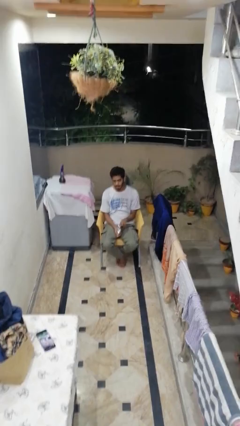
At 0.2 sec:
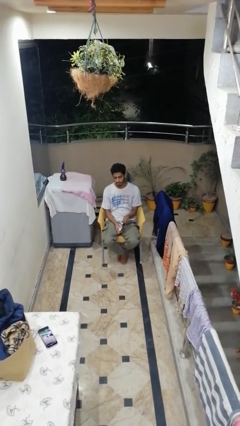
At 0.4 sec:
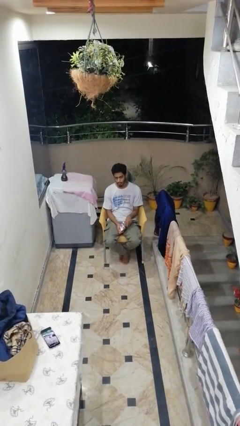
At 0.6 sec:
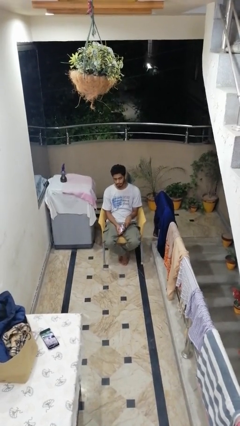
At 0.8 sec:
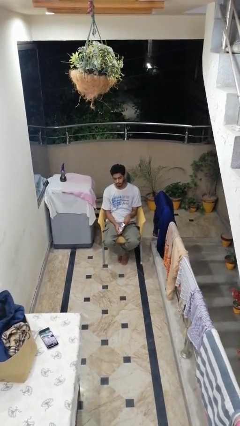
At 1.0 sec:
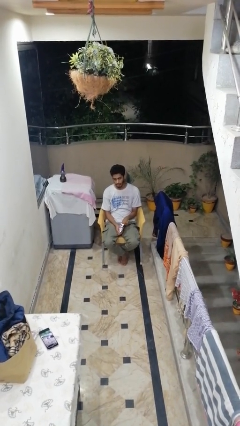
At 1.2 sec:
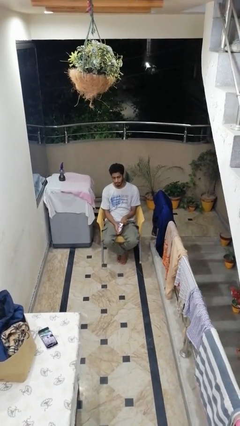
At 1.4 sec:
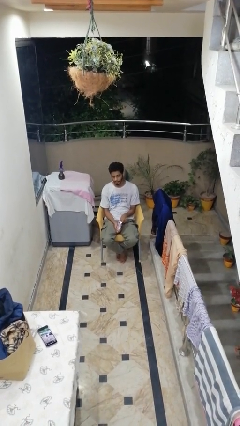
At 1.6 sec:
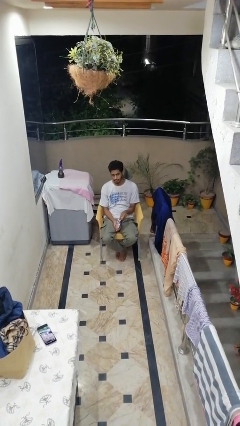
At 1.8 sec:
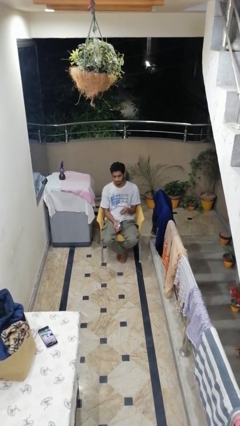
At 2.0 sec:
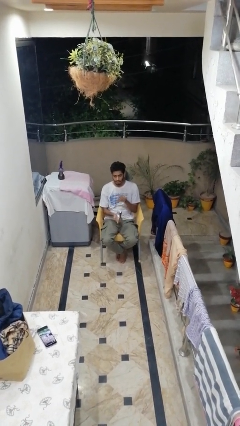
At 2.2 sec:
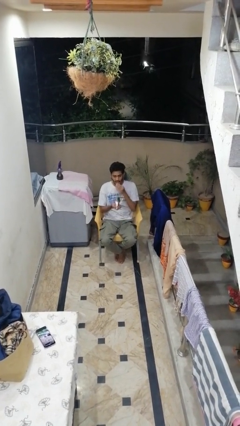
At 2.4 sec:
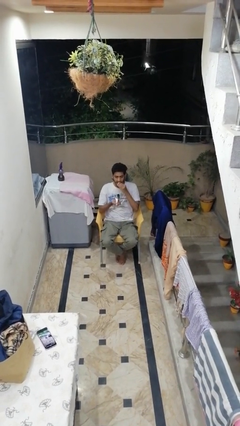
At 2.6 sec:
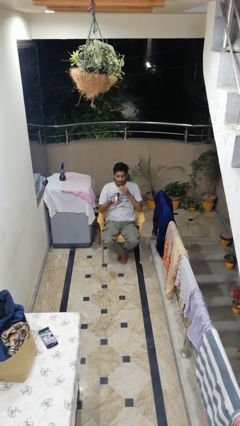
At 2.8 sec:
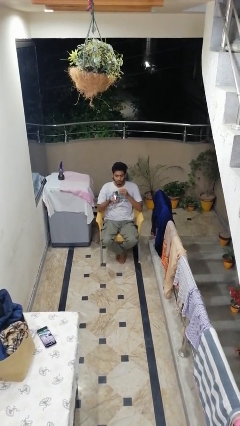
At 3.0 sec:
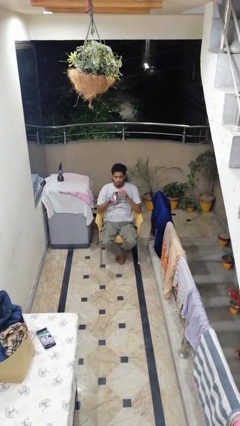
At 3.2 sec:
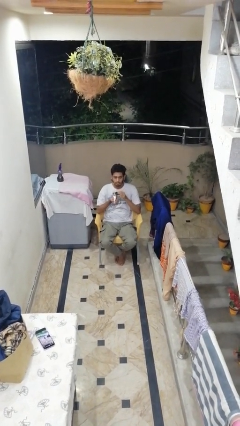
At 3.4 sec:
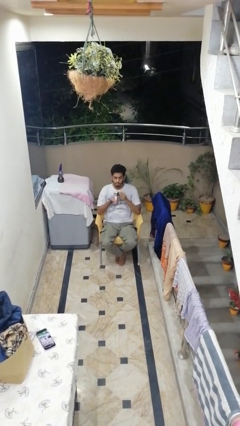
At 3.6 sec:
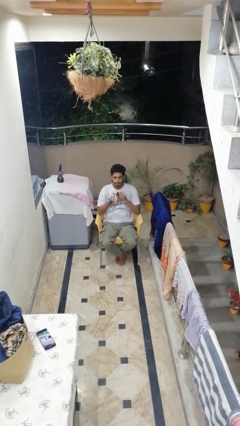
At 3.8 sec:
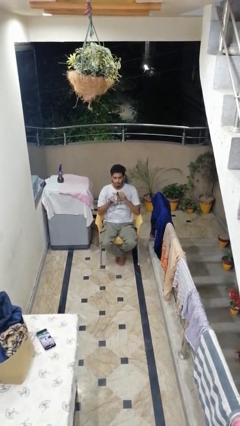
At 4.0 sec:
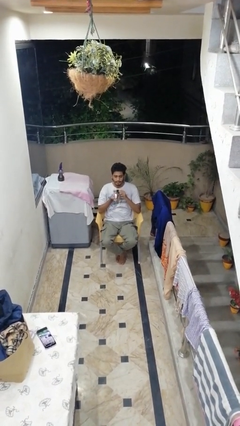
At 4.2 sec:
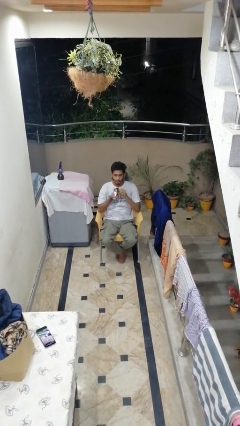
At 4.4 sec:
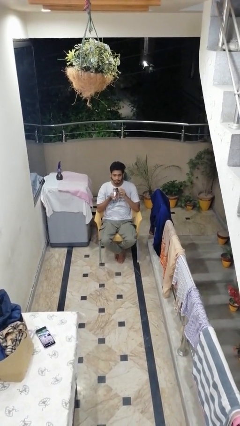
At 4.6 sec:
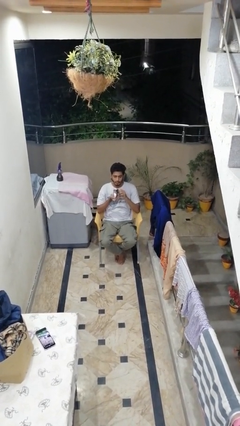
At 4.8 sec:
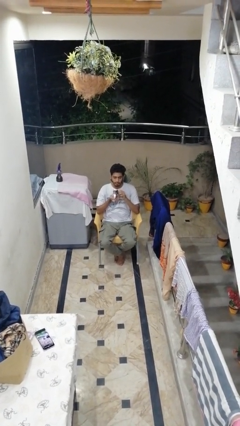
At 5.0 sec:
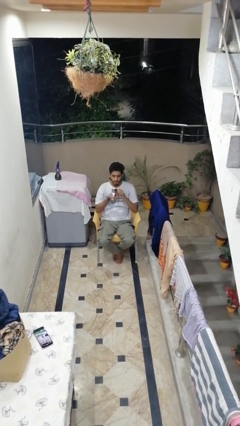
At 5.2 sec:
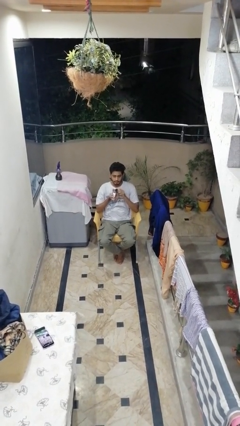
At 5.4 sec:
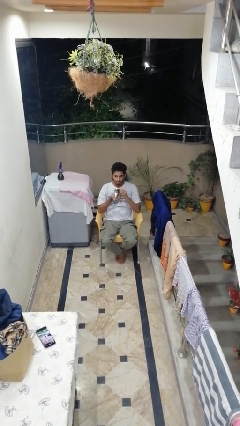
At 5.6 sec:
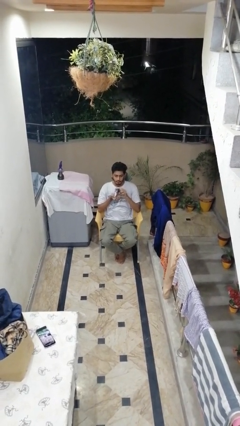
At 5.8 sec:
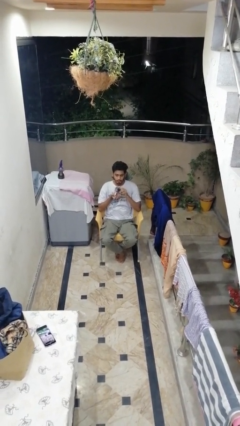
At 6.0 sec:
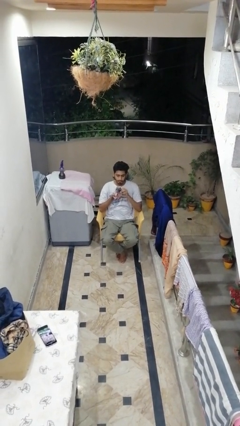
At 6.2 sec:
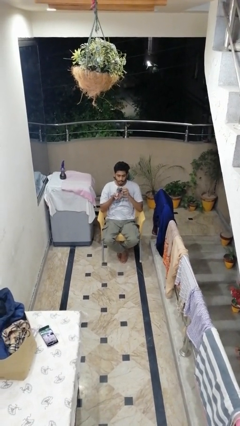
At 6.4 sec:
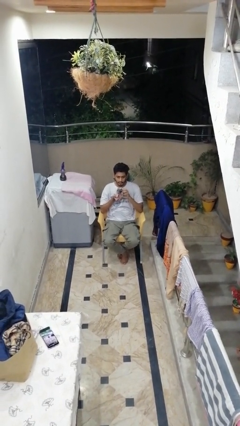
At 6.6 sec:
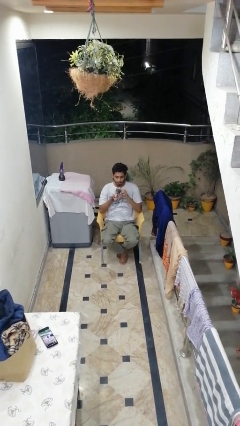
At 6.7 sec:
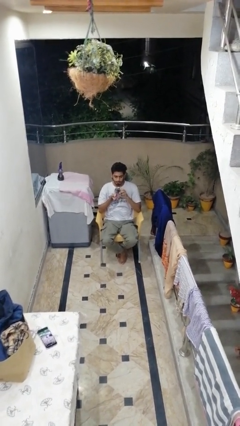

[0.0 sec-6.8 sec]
person eats snack from bag

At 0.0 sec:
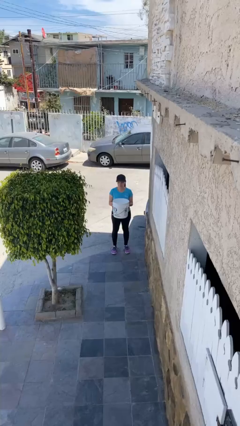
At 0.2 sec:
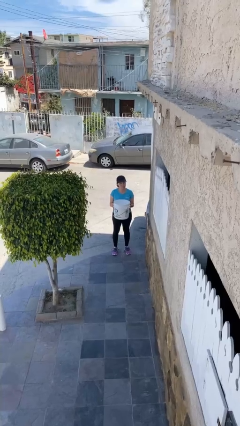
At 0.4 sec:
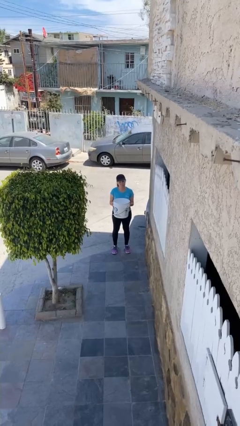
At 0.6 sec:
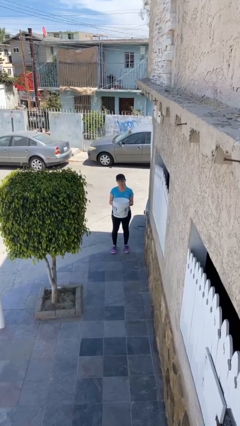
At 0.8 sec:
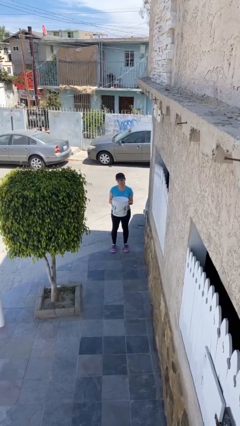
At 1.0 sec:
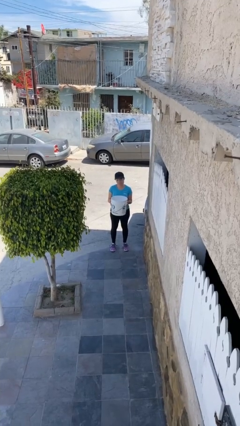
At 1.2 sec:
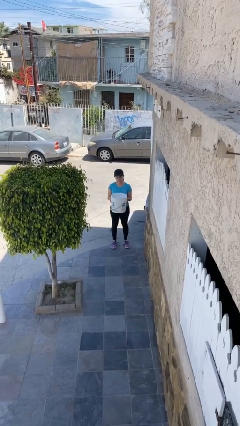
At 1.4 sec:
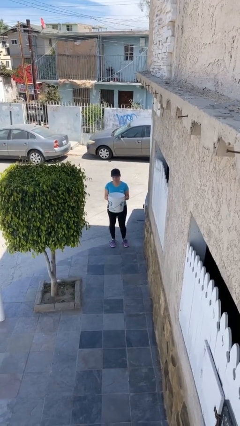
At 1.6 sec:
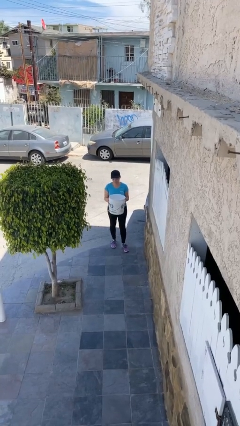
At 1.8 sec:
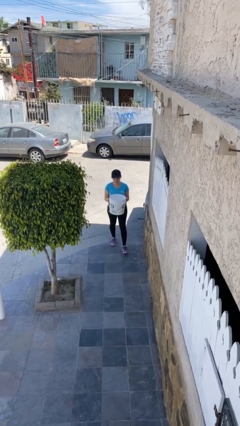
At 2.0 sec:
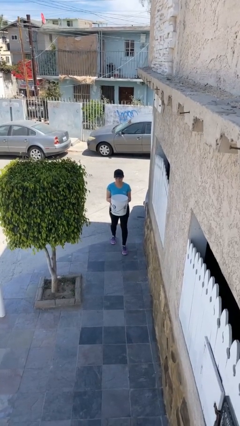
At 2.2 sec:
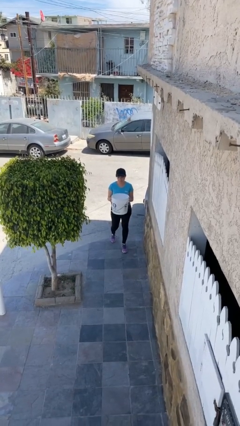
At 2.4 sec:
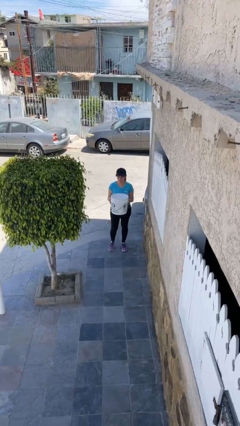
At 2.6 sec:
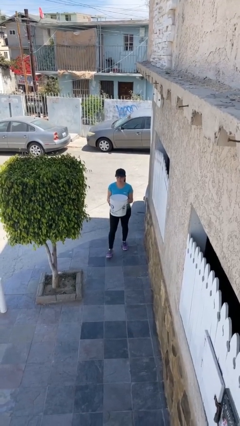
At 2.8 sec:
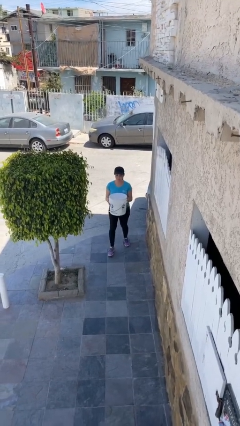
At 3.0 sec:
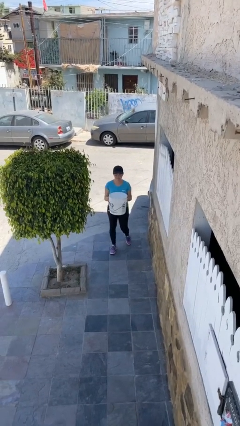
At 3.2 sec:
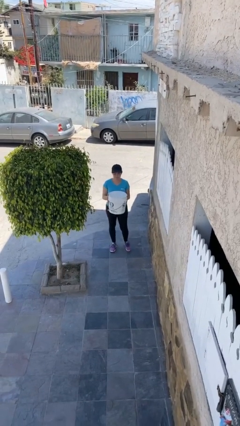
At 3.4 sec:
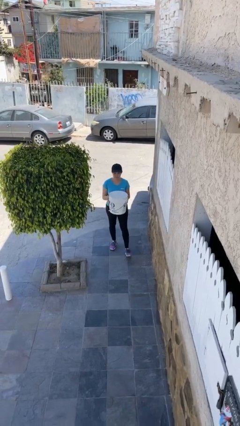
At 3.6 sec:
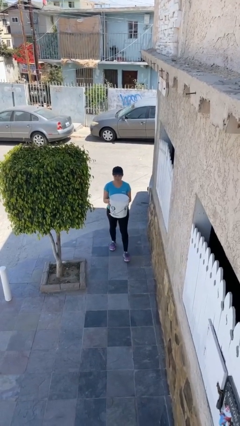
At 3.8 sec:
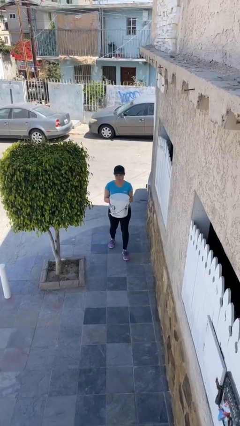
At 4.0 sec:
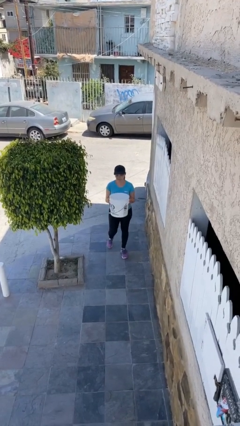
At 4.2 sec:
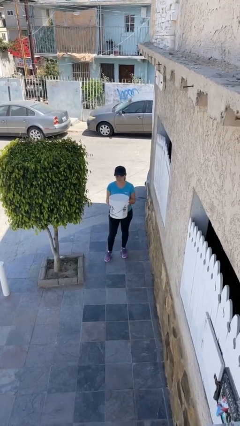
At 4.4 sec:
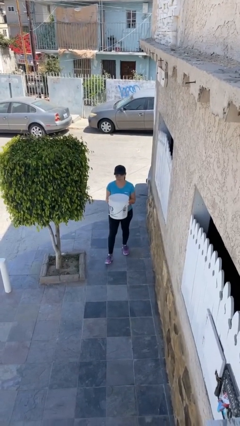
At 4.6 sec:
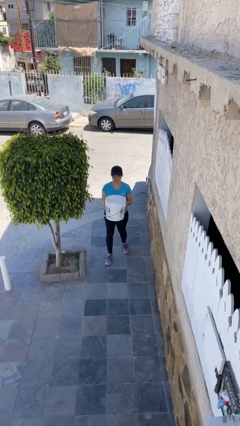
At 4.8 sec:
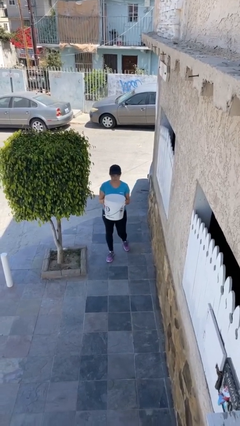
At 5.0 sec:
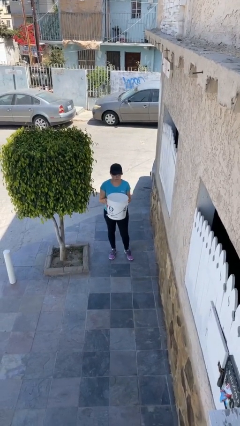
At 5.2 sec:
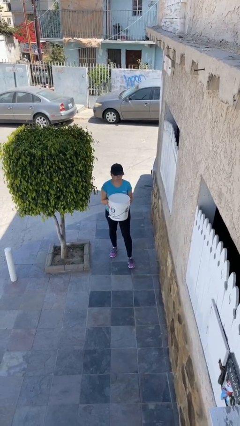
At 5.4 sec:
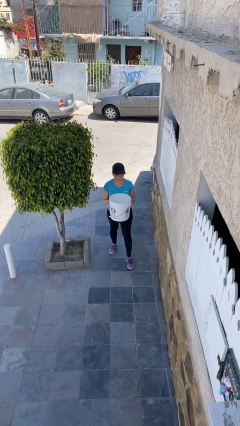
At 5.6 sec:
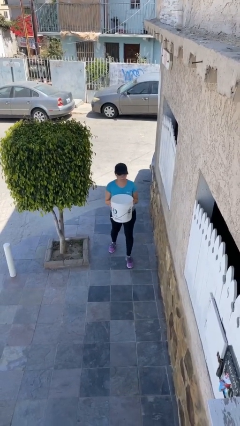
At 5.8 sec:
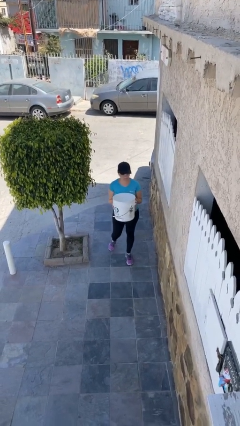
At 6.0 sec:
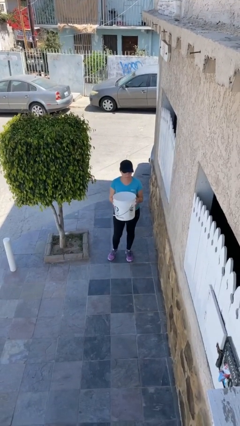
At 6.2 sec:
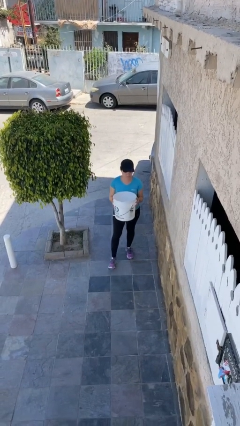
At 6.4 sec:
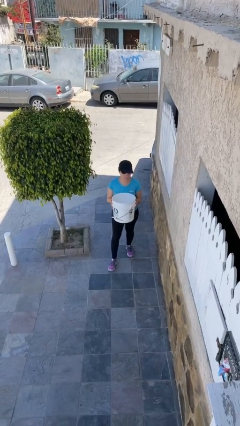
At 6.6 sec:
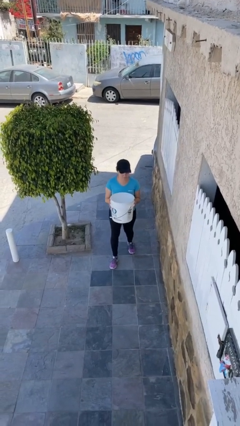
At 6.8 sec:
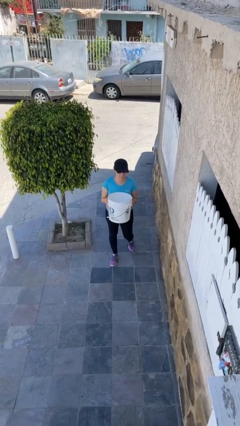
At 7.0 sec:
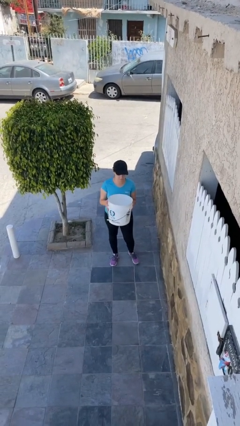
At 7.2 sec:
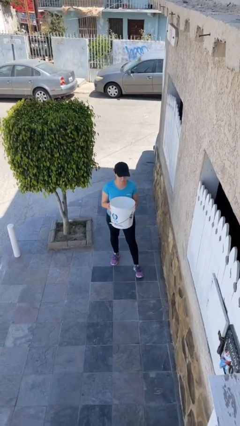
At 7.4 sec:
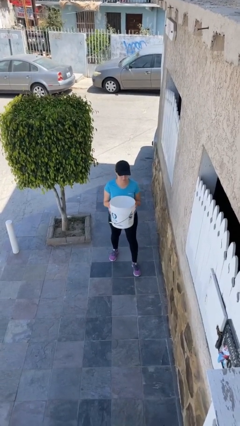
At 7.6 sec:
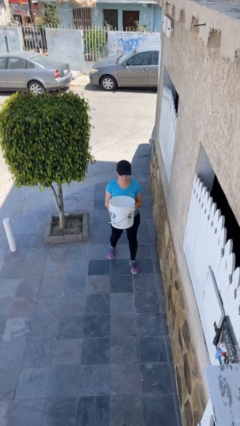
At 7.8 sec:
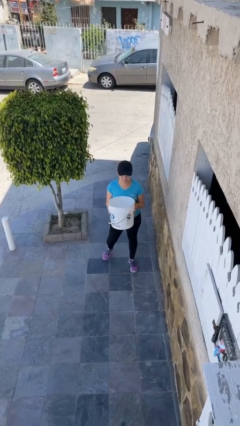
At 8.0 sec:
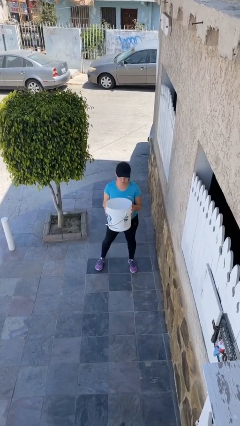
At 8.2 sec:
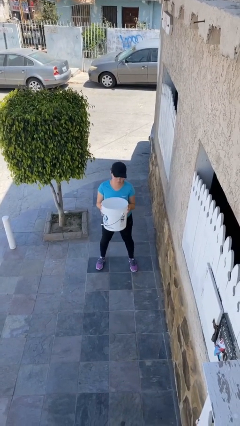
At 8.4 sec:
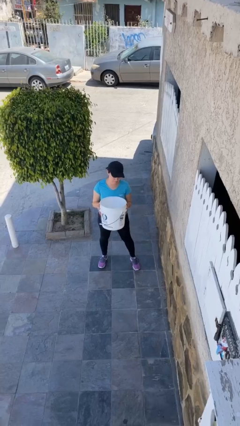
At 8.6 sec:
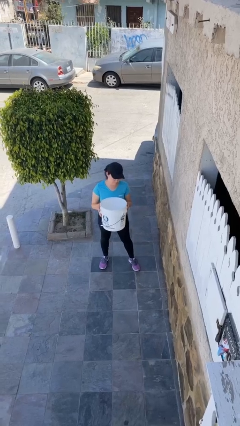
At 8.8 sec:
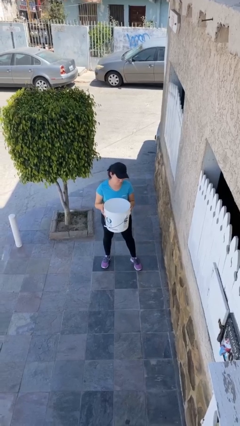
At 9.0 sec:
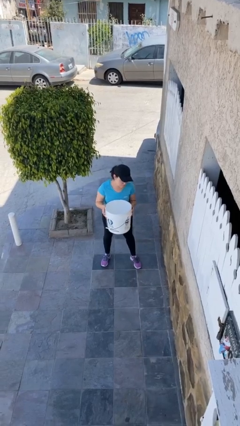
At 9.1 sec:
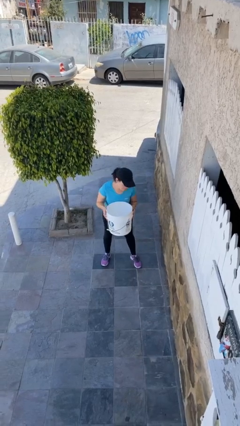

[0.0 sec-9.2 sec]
person carries heavy object

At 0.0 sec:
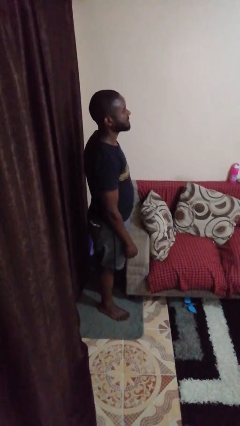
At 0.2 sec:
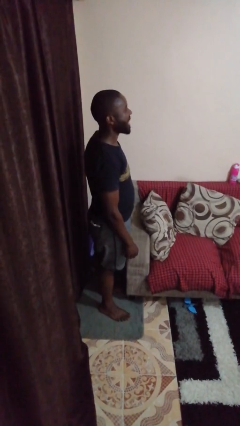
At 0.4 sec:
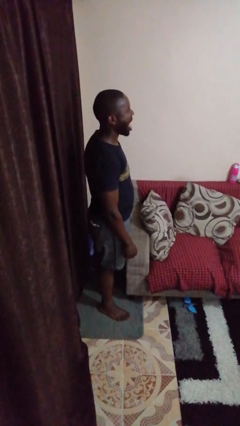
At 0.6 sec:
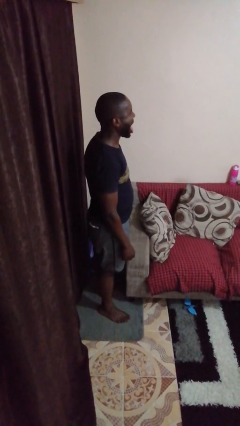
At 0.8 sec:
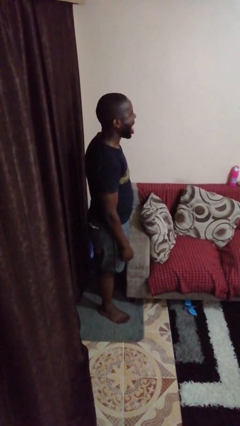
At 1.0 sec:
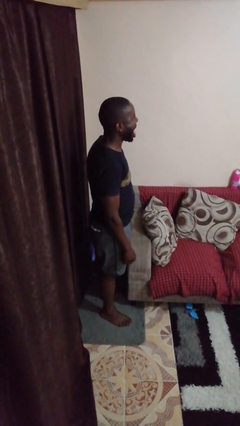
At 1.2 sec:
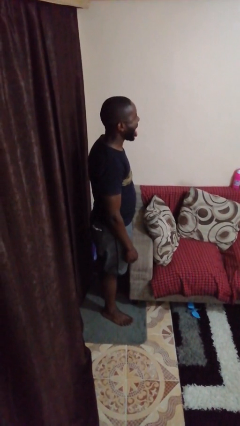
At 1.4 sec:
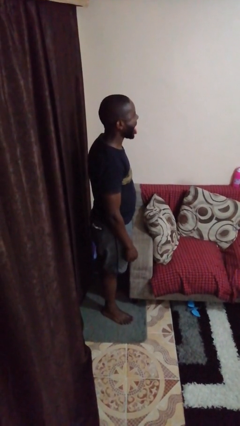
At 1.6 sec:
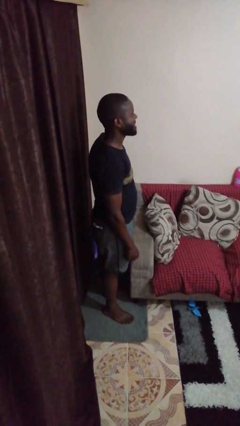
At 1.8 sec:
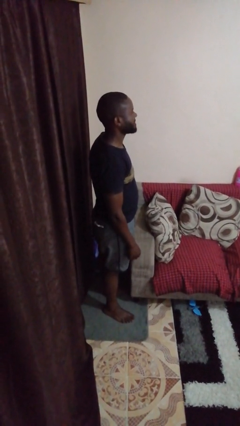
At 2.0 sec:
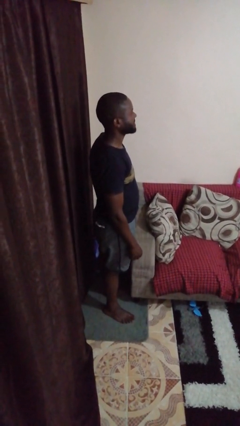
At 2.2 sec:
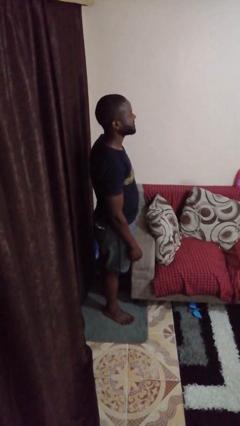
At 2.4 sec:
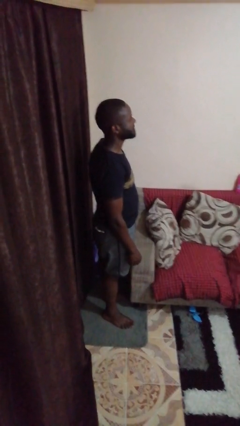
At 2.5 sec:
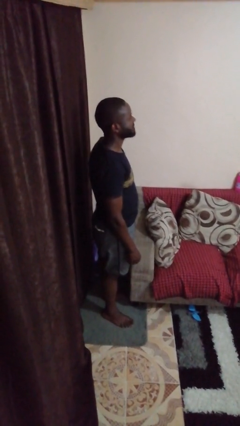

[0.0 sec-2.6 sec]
person sticks out tongue
